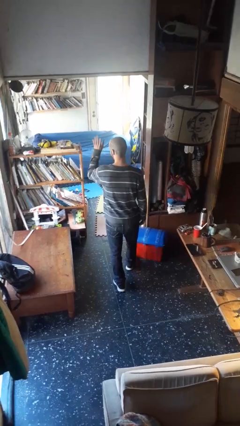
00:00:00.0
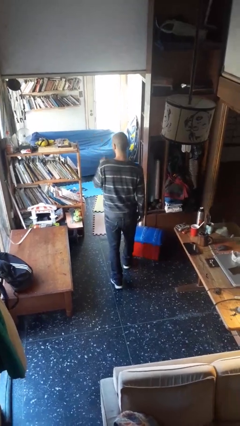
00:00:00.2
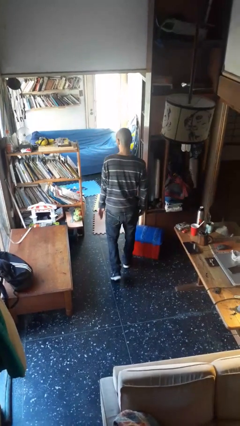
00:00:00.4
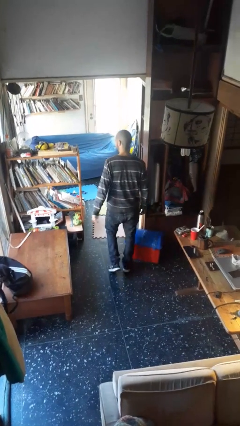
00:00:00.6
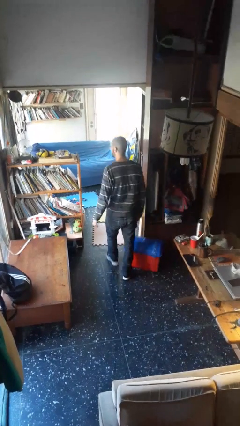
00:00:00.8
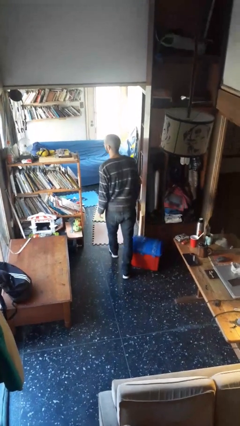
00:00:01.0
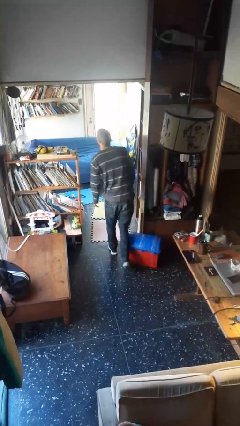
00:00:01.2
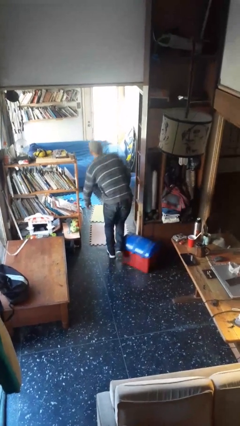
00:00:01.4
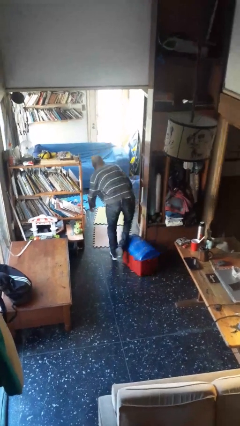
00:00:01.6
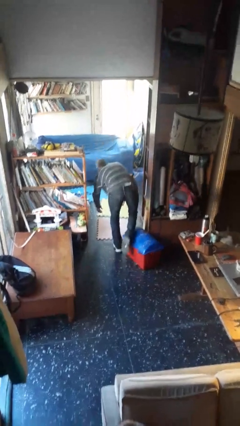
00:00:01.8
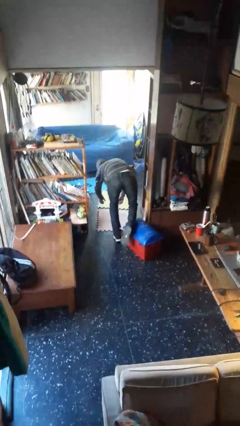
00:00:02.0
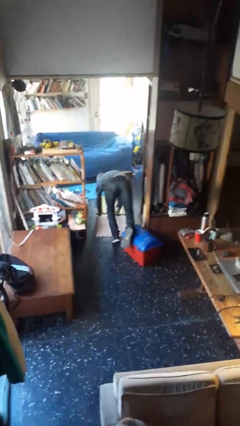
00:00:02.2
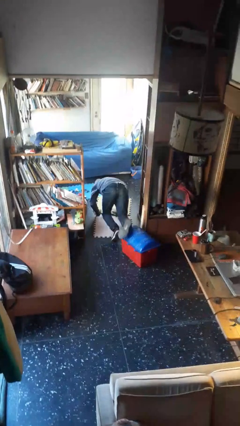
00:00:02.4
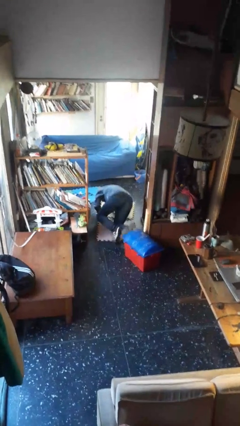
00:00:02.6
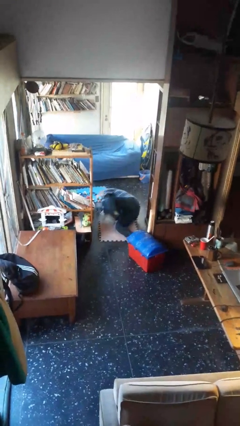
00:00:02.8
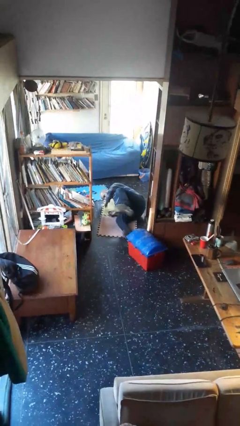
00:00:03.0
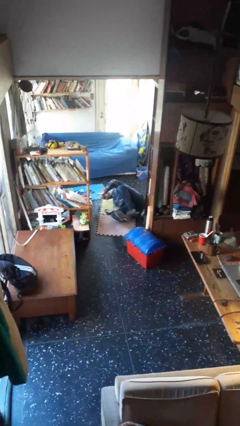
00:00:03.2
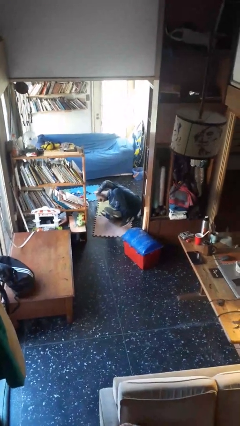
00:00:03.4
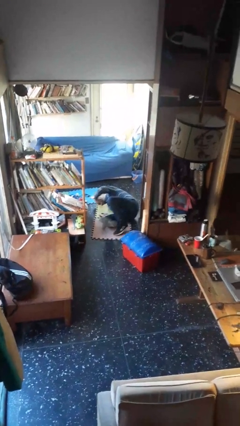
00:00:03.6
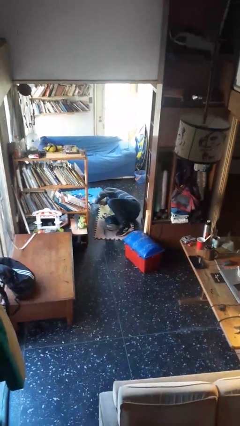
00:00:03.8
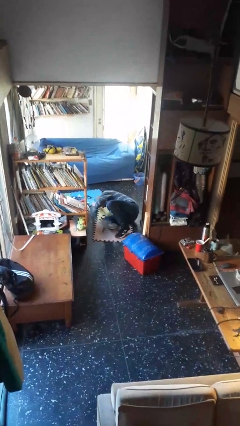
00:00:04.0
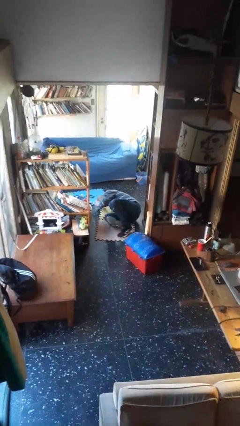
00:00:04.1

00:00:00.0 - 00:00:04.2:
person trips on object on floor

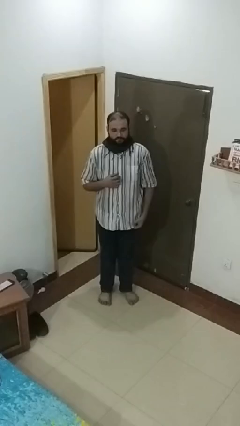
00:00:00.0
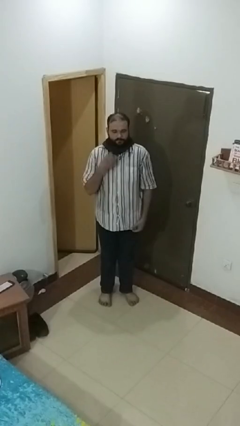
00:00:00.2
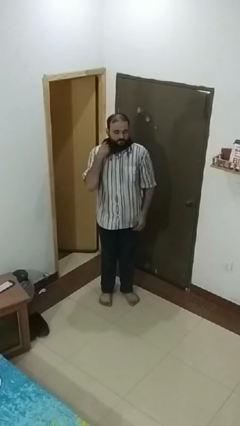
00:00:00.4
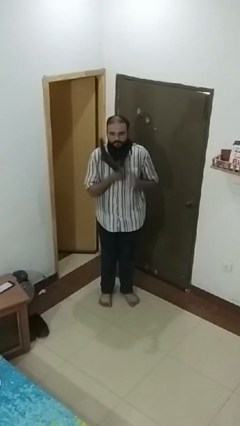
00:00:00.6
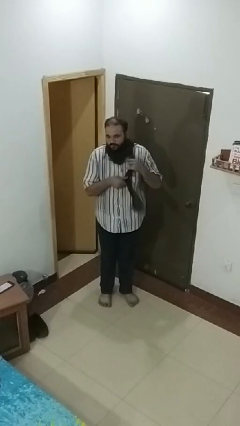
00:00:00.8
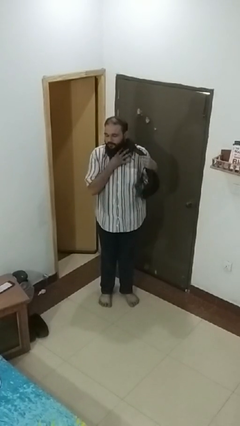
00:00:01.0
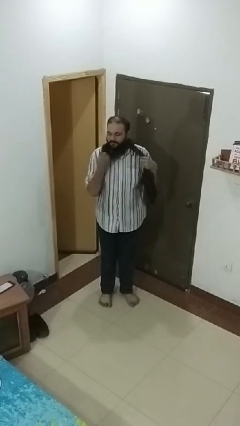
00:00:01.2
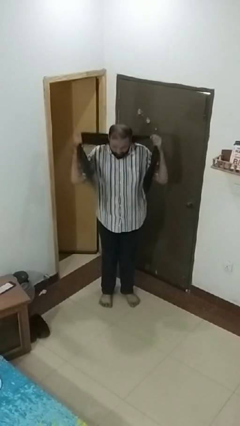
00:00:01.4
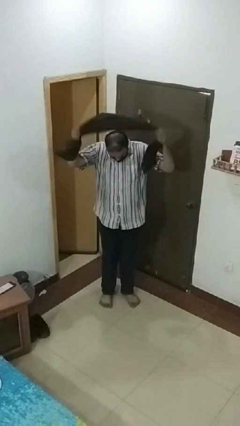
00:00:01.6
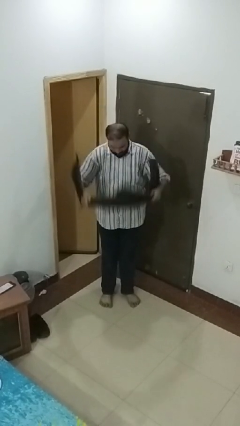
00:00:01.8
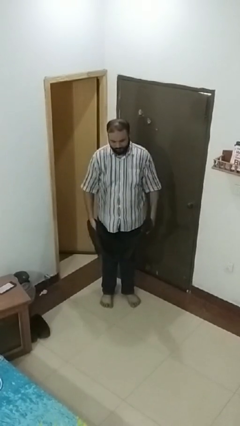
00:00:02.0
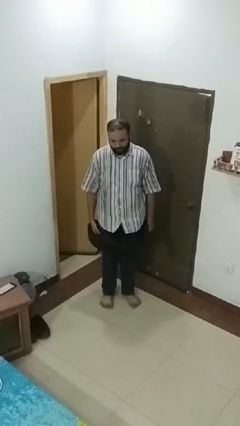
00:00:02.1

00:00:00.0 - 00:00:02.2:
person takes off scarf

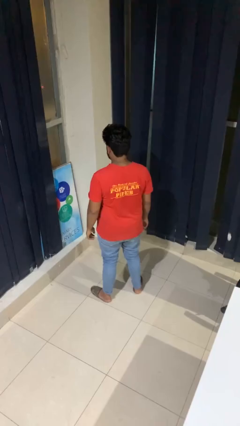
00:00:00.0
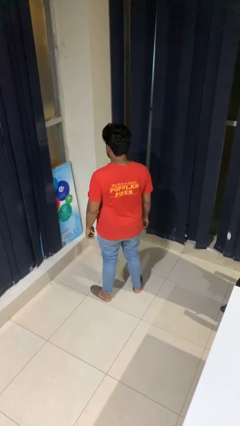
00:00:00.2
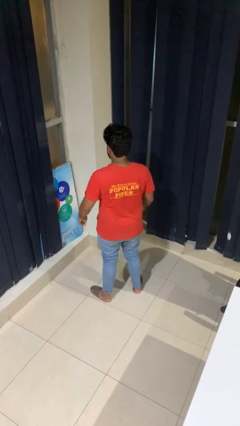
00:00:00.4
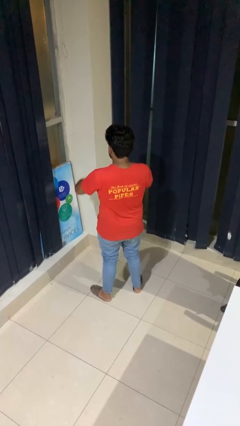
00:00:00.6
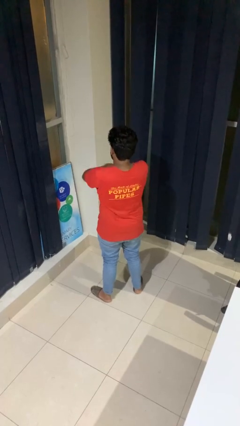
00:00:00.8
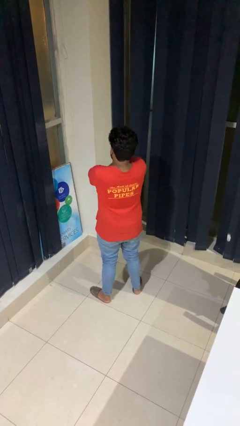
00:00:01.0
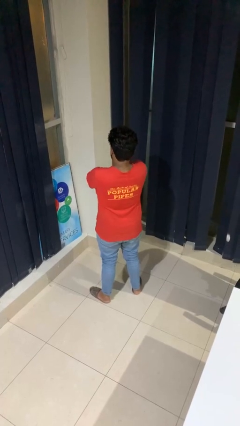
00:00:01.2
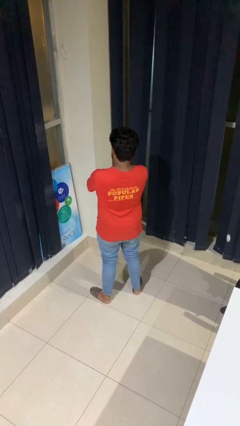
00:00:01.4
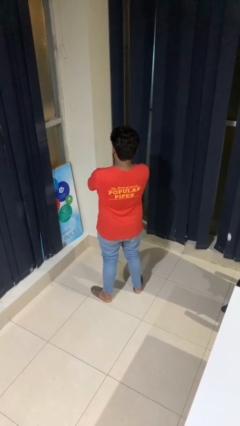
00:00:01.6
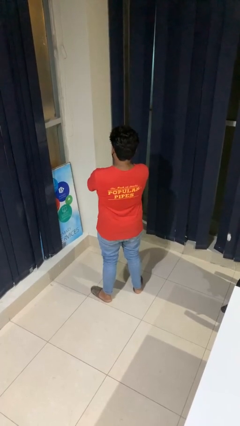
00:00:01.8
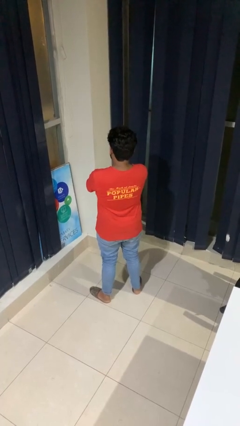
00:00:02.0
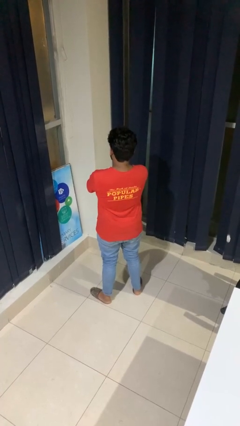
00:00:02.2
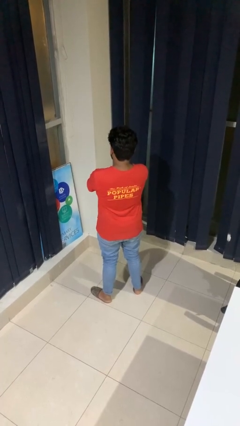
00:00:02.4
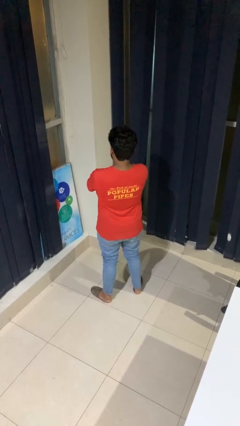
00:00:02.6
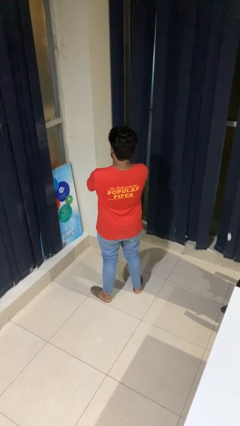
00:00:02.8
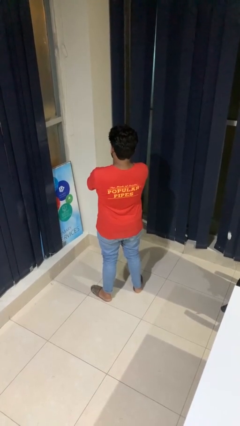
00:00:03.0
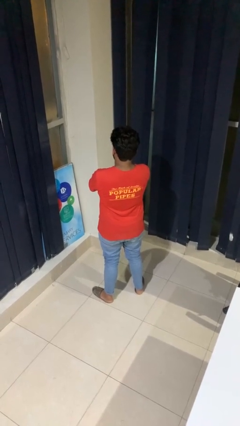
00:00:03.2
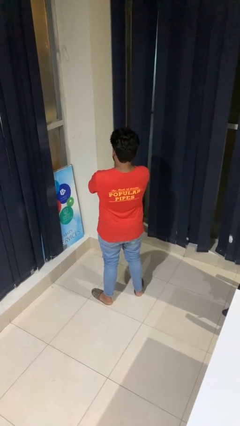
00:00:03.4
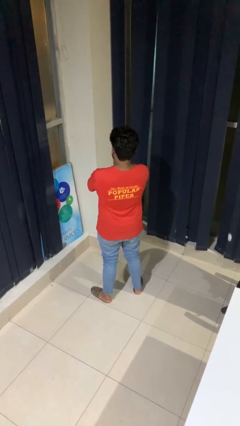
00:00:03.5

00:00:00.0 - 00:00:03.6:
person crosses arms

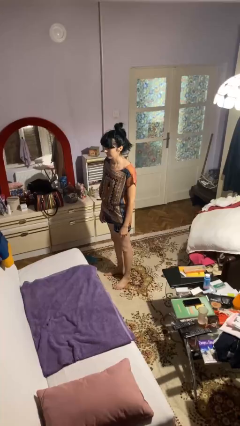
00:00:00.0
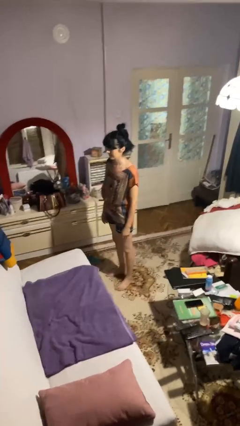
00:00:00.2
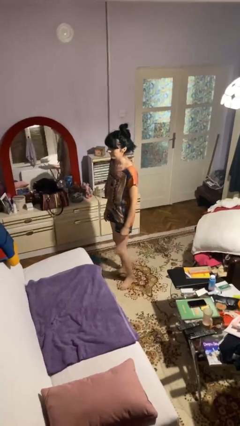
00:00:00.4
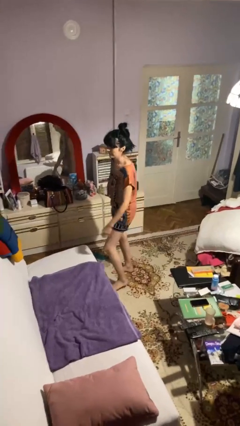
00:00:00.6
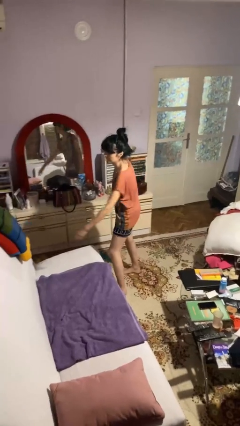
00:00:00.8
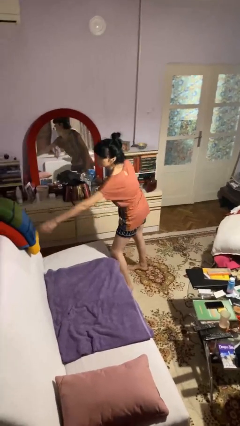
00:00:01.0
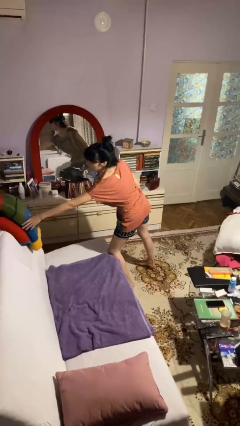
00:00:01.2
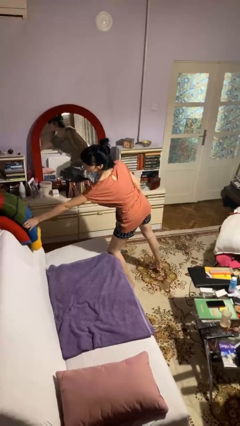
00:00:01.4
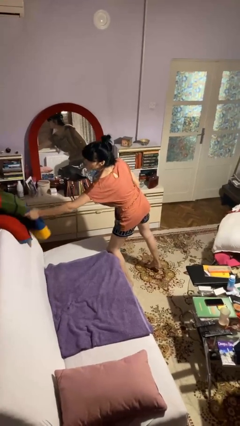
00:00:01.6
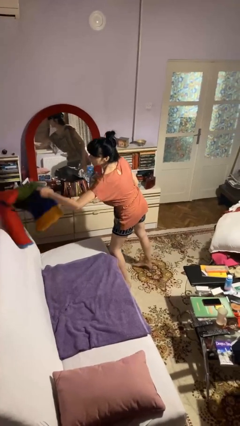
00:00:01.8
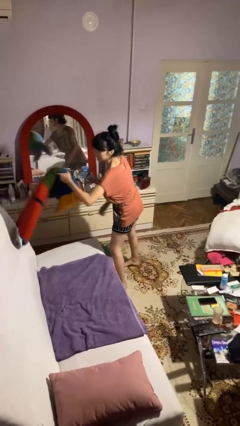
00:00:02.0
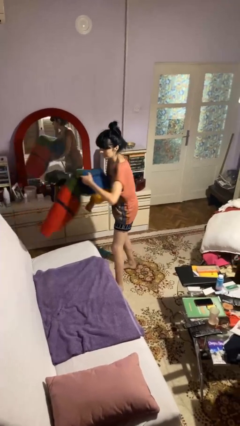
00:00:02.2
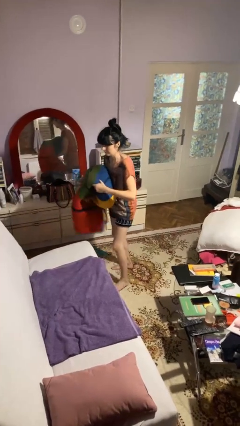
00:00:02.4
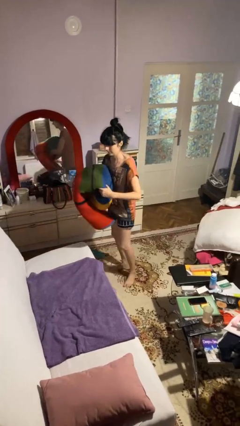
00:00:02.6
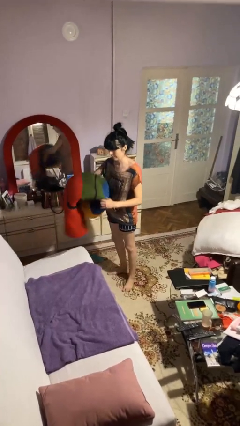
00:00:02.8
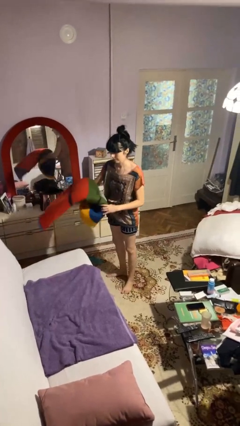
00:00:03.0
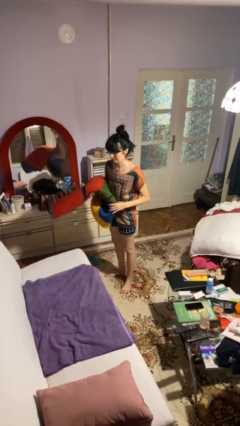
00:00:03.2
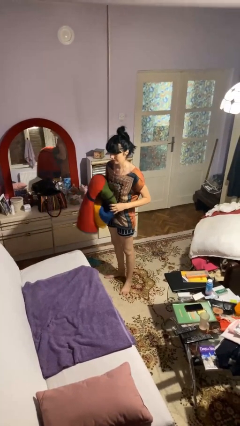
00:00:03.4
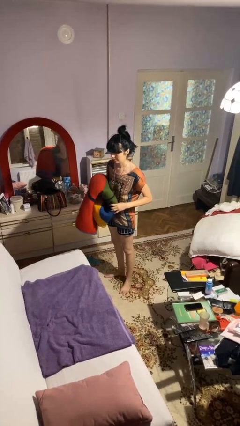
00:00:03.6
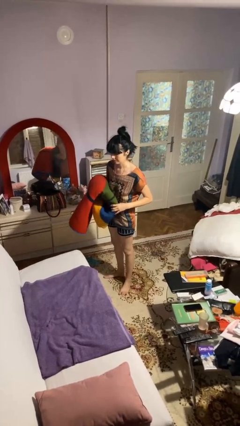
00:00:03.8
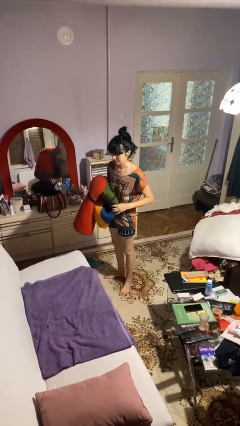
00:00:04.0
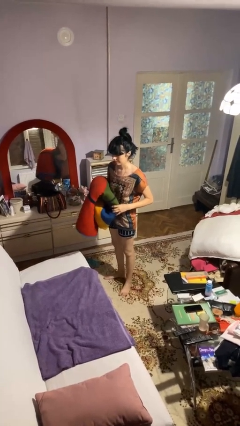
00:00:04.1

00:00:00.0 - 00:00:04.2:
person picks up object from couch

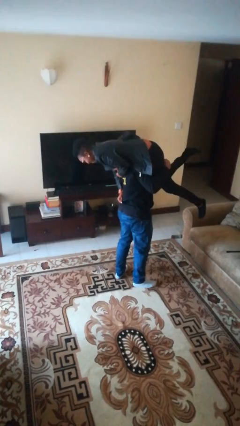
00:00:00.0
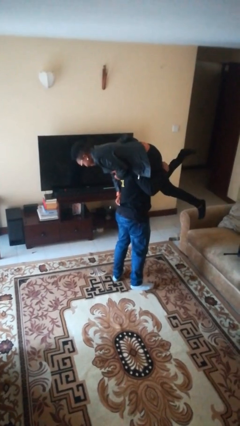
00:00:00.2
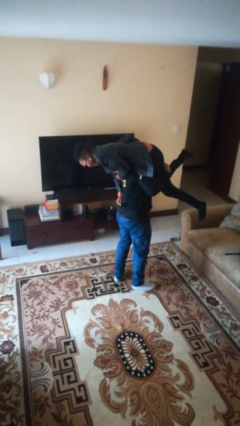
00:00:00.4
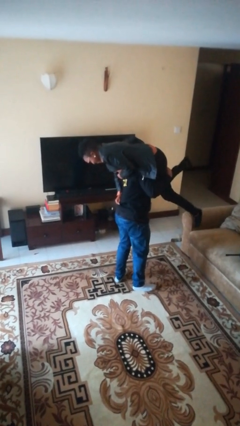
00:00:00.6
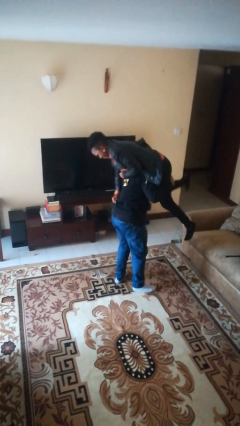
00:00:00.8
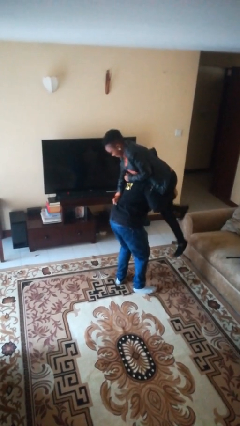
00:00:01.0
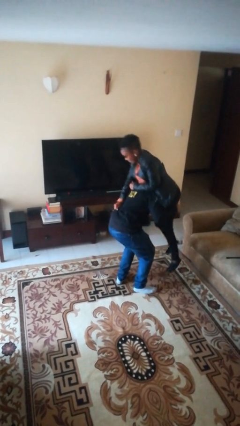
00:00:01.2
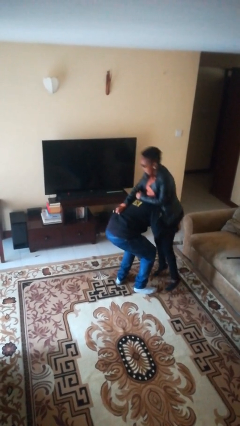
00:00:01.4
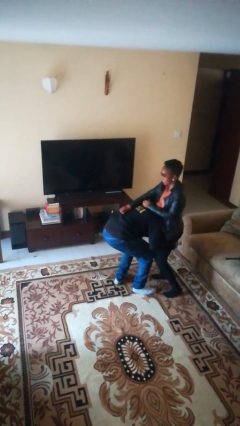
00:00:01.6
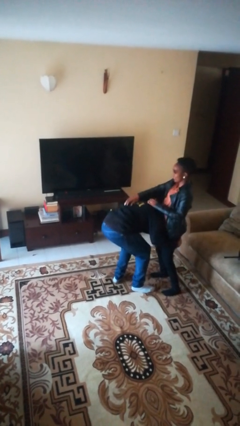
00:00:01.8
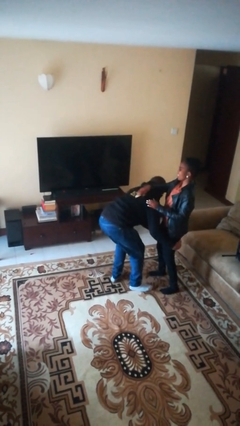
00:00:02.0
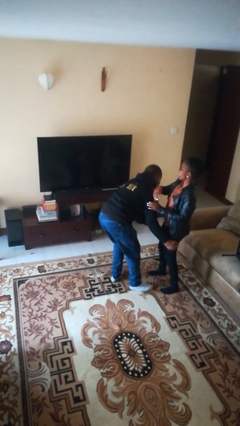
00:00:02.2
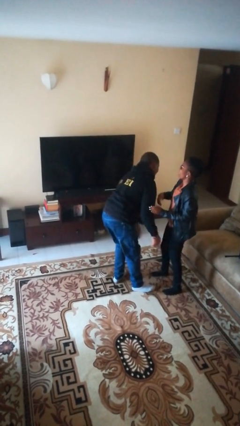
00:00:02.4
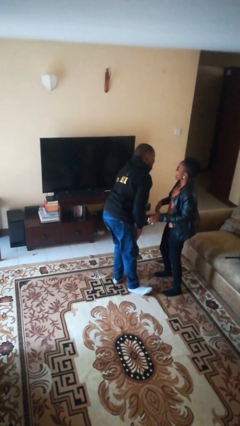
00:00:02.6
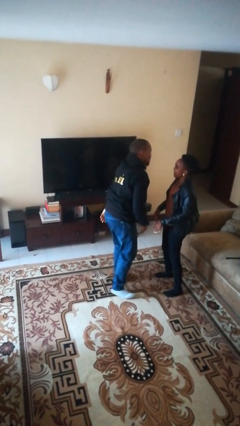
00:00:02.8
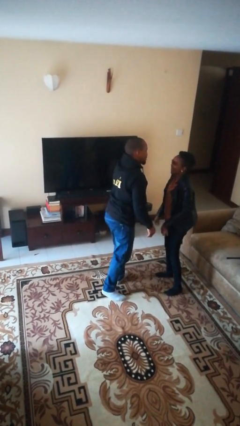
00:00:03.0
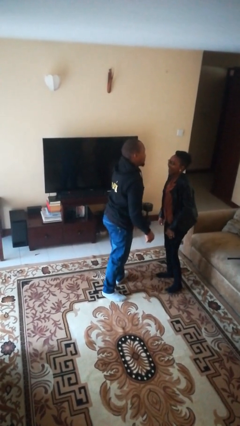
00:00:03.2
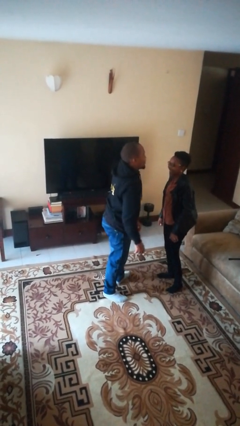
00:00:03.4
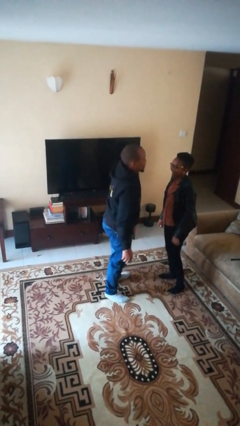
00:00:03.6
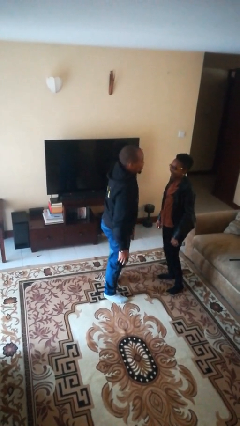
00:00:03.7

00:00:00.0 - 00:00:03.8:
person puts down person
